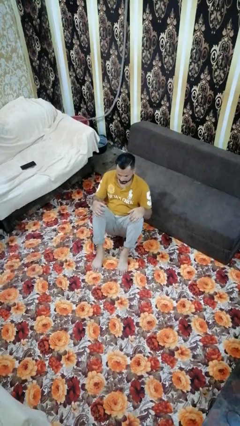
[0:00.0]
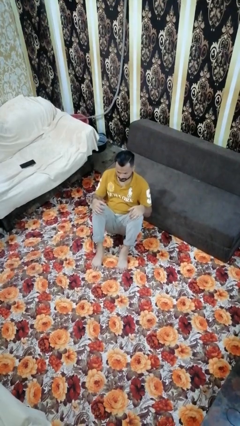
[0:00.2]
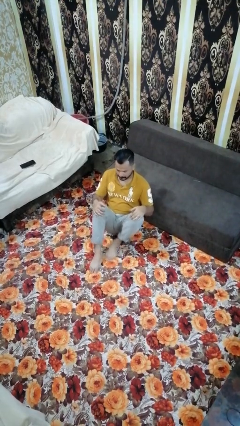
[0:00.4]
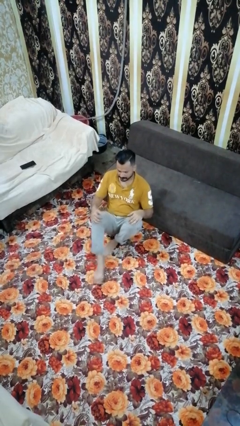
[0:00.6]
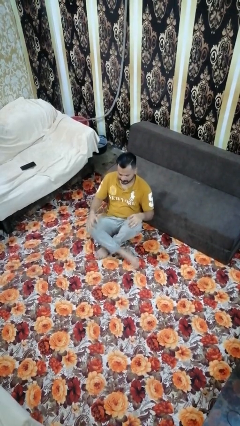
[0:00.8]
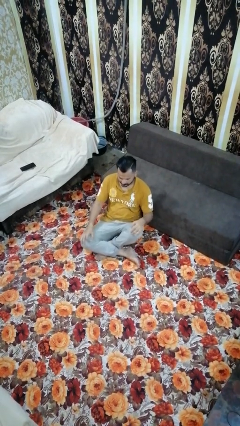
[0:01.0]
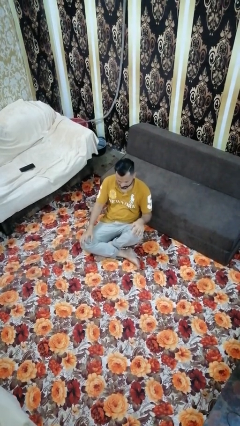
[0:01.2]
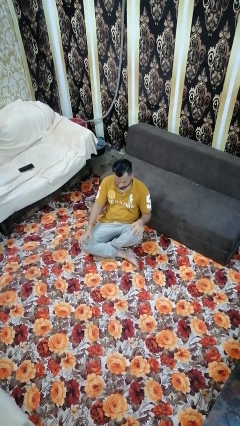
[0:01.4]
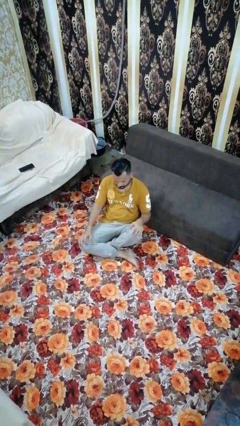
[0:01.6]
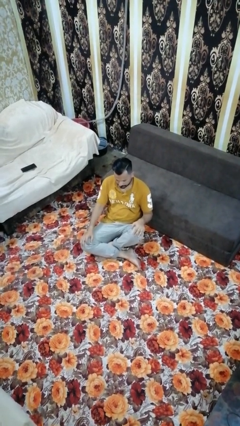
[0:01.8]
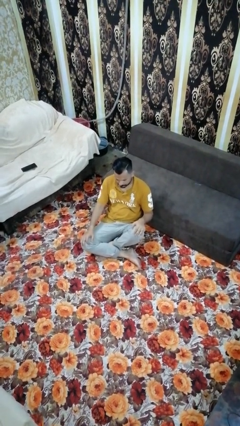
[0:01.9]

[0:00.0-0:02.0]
person crosses legs

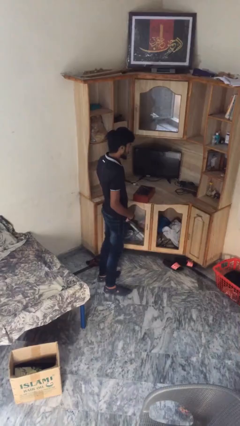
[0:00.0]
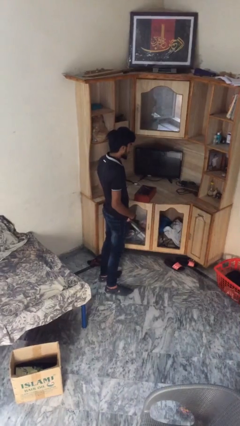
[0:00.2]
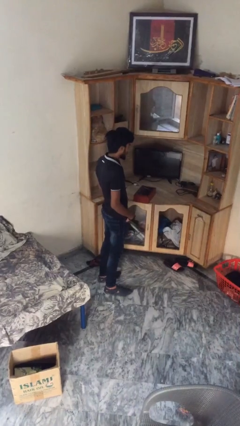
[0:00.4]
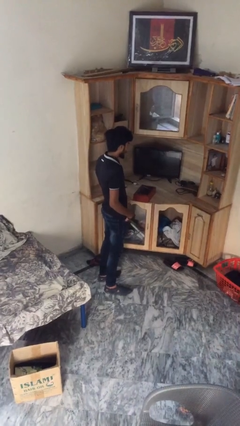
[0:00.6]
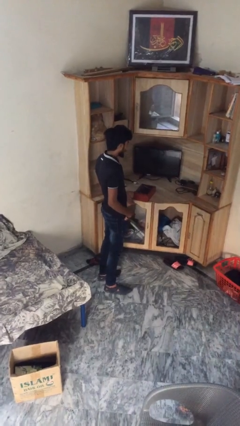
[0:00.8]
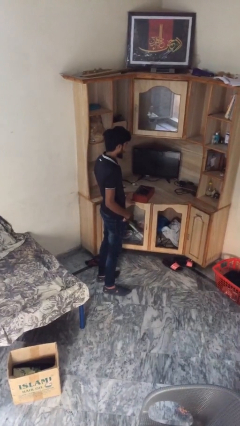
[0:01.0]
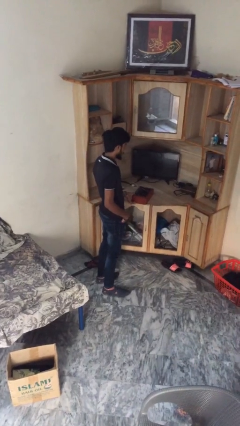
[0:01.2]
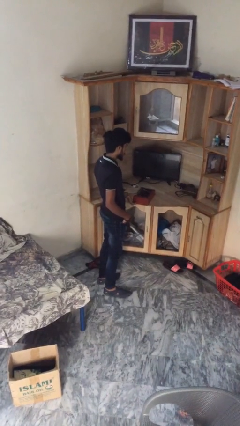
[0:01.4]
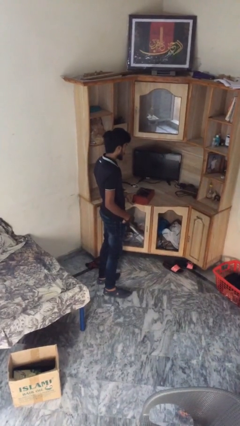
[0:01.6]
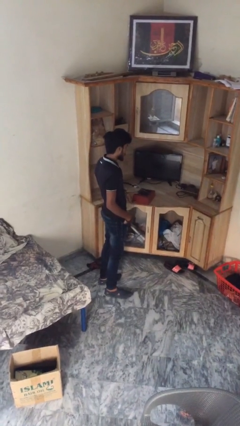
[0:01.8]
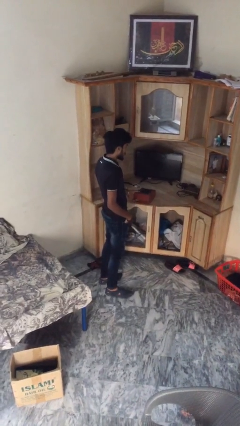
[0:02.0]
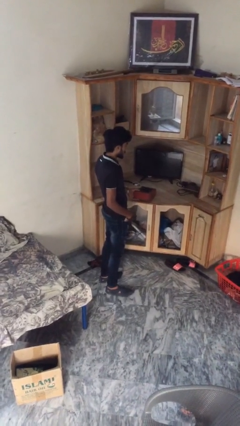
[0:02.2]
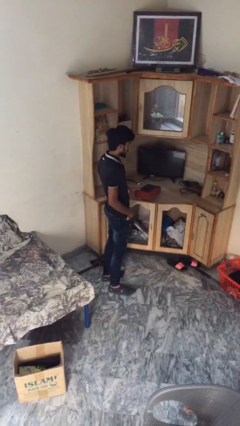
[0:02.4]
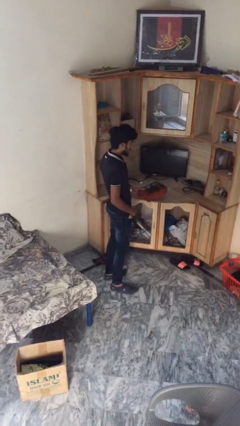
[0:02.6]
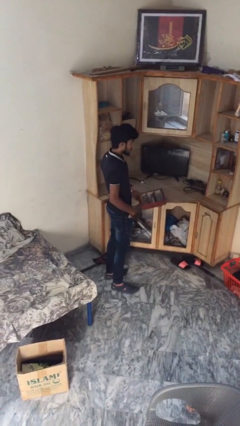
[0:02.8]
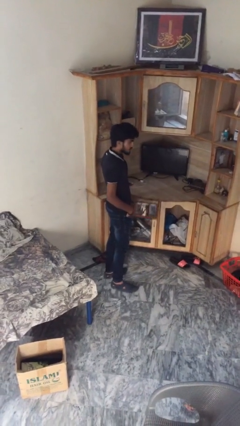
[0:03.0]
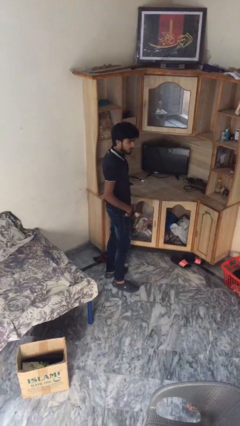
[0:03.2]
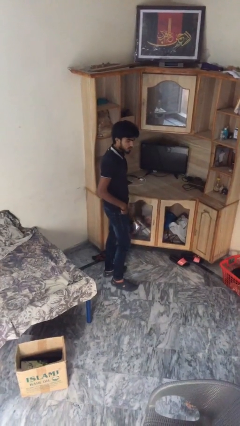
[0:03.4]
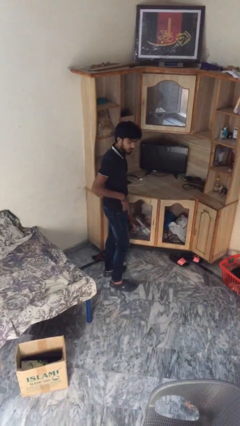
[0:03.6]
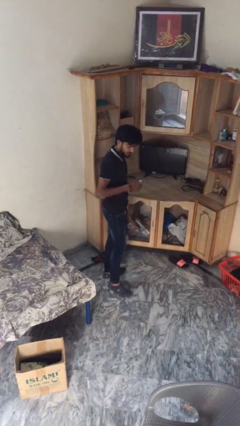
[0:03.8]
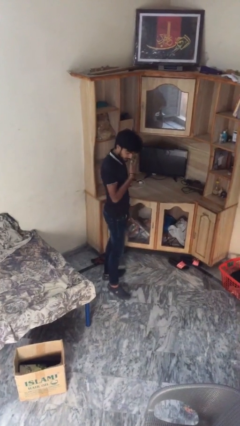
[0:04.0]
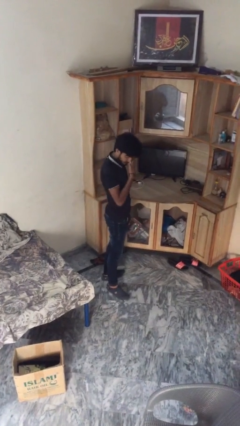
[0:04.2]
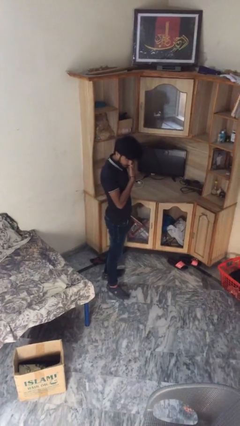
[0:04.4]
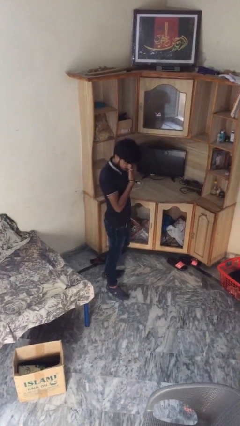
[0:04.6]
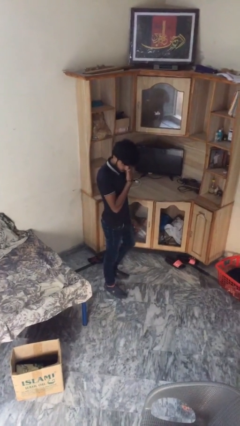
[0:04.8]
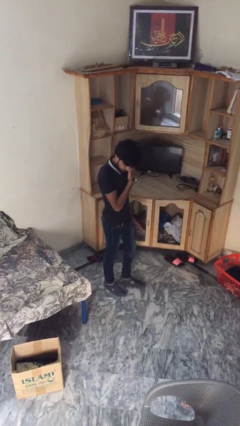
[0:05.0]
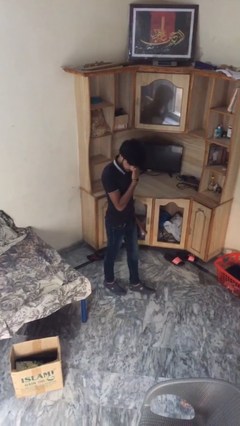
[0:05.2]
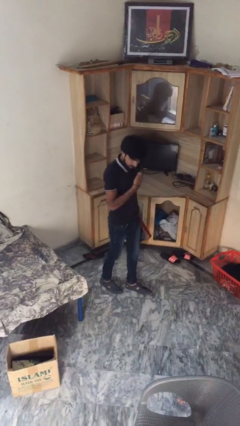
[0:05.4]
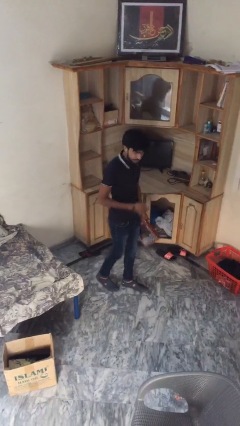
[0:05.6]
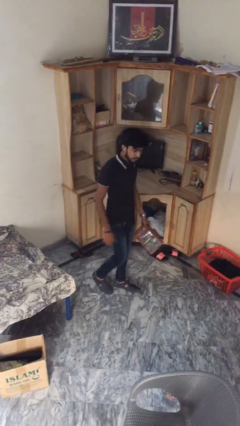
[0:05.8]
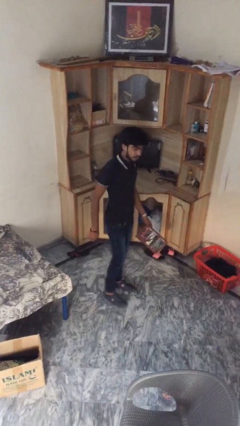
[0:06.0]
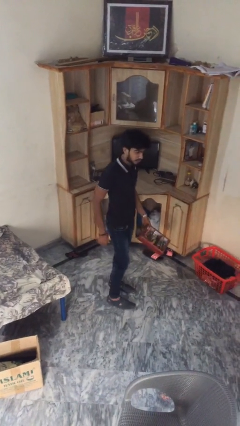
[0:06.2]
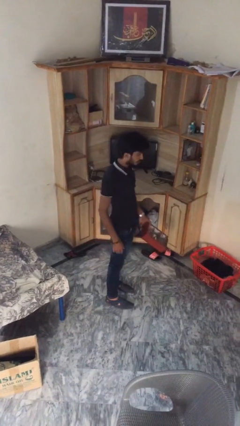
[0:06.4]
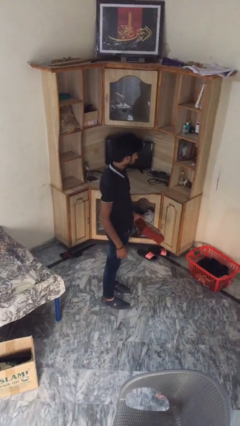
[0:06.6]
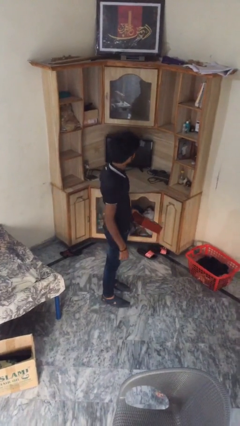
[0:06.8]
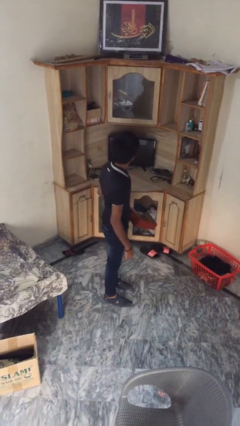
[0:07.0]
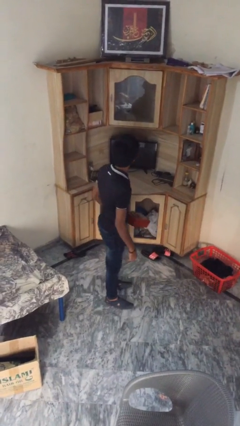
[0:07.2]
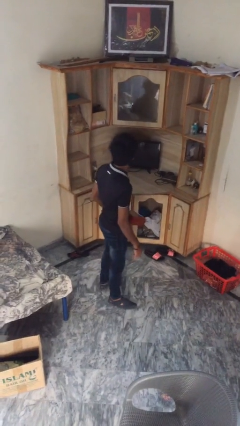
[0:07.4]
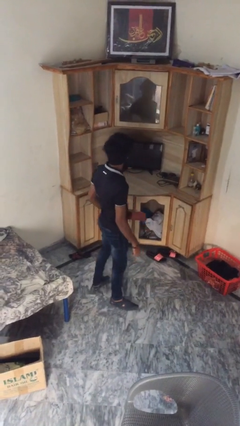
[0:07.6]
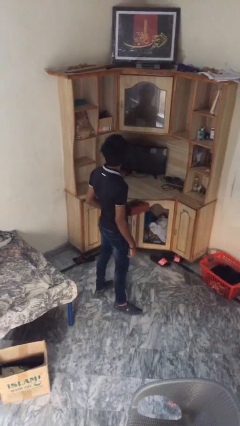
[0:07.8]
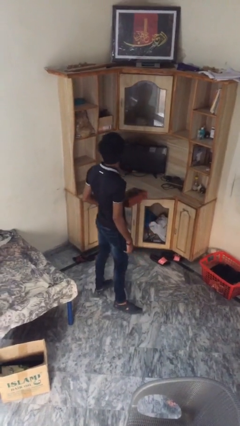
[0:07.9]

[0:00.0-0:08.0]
person picks up object from table

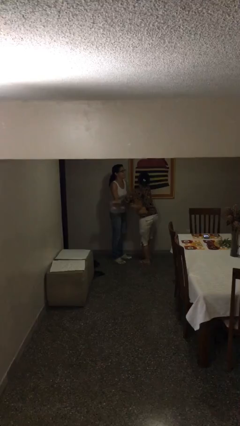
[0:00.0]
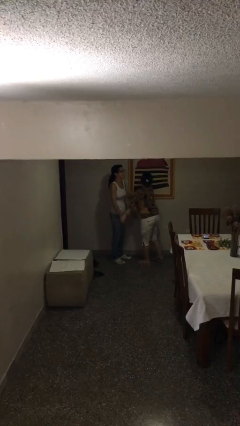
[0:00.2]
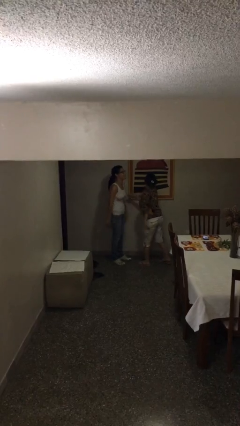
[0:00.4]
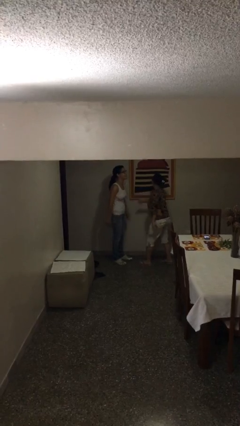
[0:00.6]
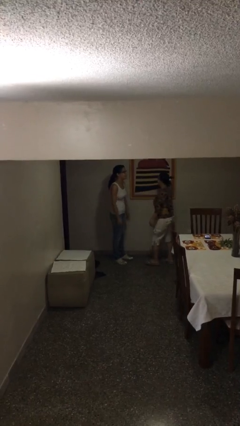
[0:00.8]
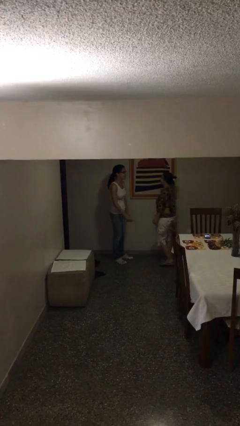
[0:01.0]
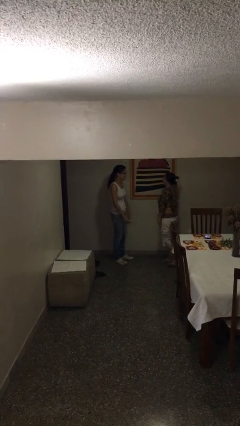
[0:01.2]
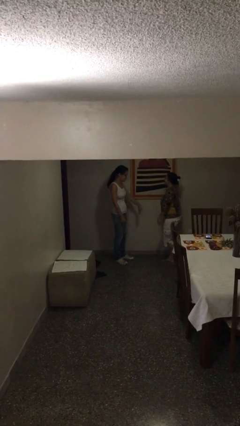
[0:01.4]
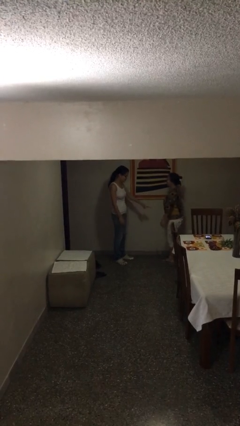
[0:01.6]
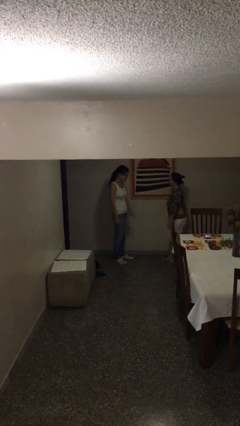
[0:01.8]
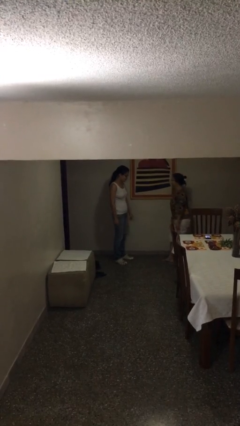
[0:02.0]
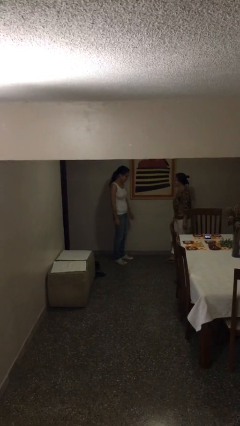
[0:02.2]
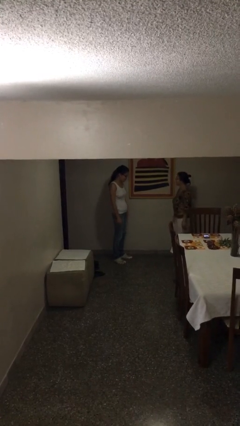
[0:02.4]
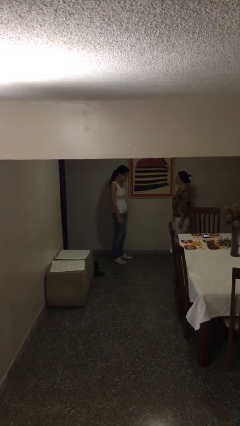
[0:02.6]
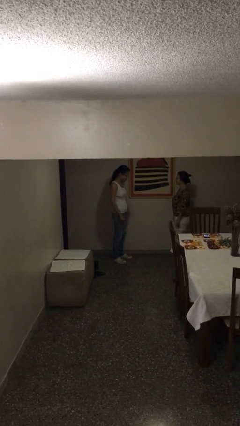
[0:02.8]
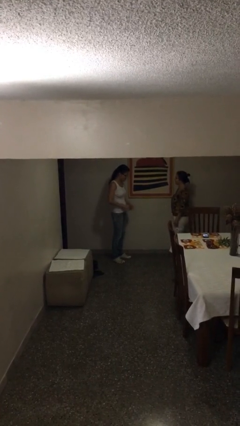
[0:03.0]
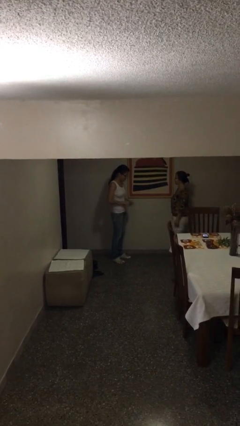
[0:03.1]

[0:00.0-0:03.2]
person talks to person

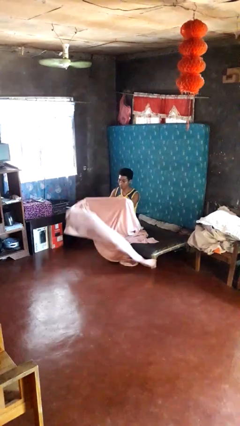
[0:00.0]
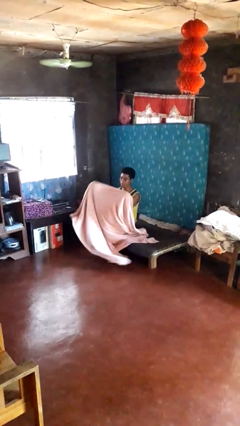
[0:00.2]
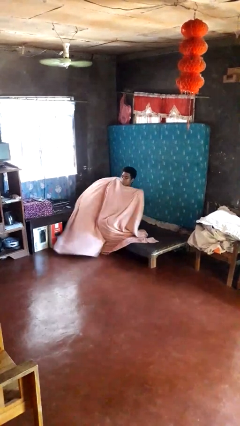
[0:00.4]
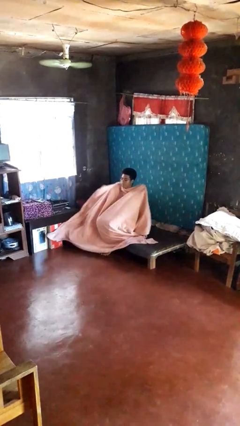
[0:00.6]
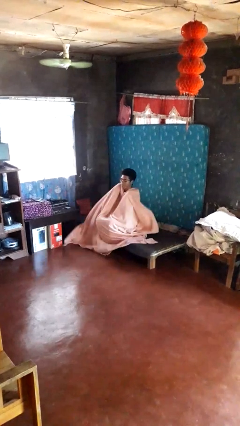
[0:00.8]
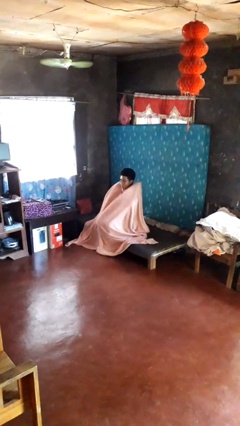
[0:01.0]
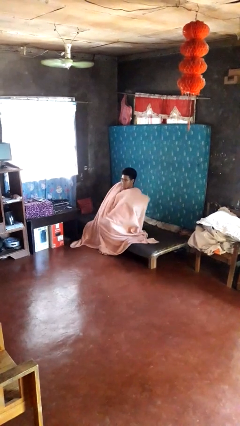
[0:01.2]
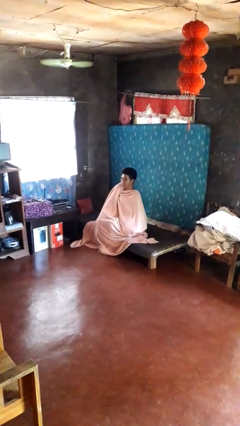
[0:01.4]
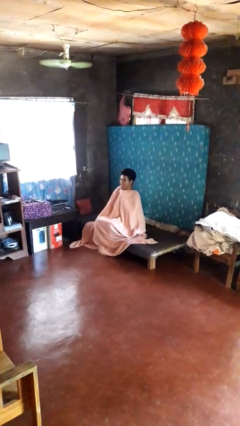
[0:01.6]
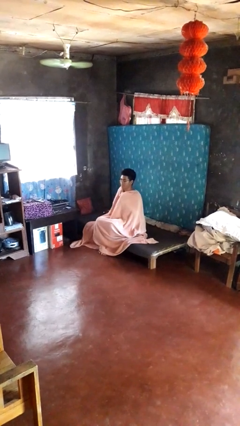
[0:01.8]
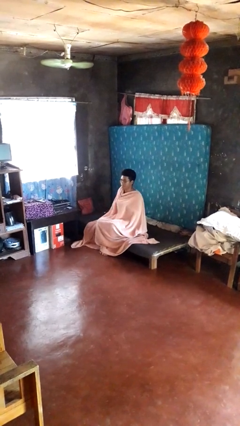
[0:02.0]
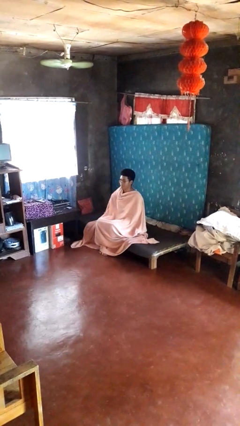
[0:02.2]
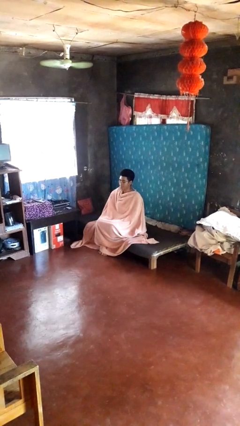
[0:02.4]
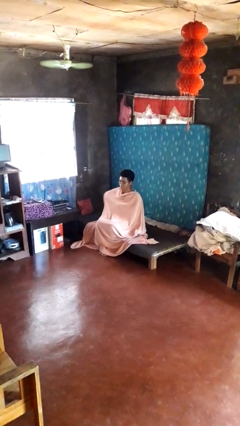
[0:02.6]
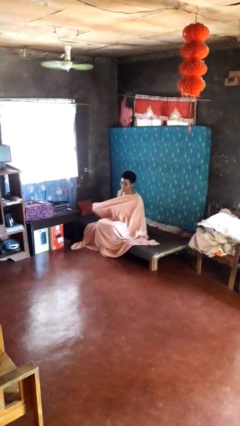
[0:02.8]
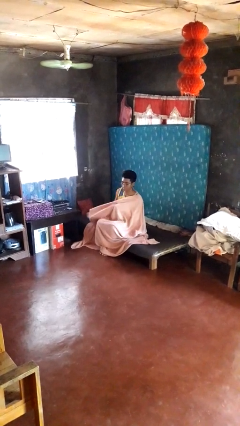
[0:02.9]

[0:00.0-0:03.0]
person covers with blanket

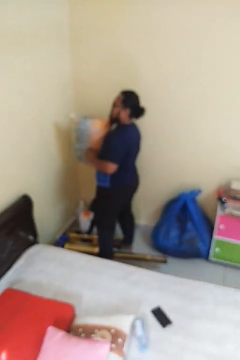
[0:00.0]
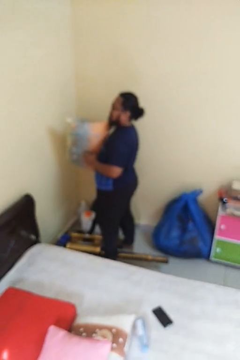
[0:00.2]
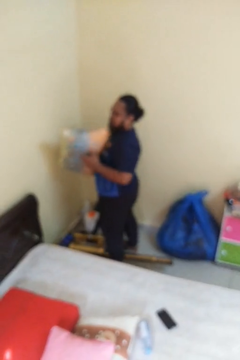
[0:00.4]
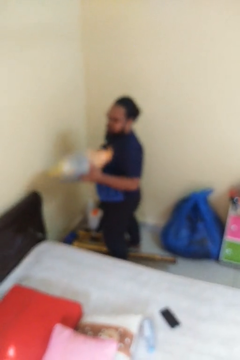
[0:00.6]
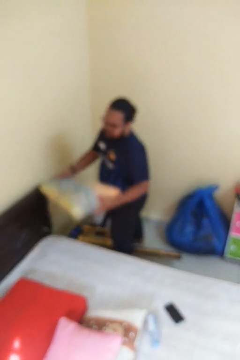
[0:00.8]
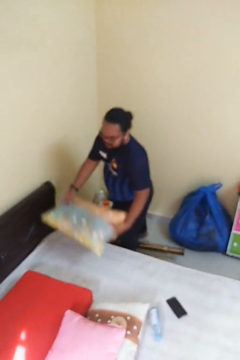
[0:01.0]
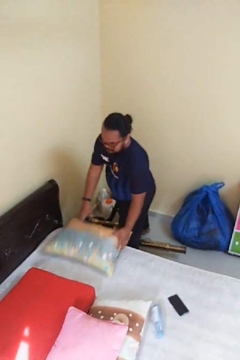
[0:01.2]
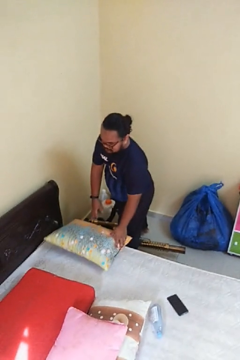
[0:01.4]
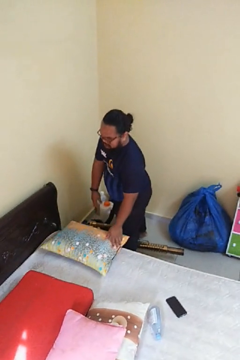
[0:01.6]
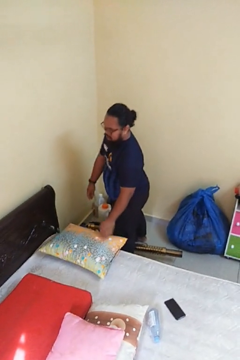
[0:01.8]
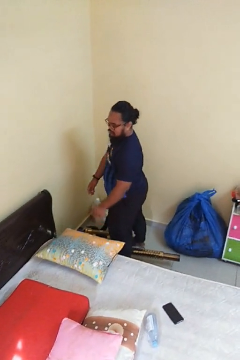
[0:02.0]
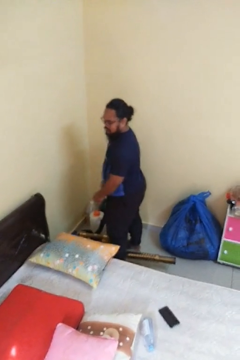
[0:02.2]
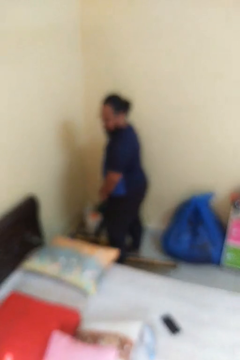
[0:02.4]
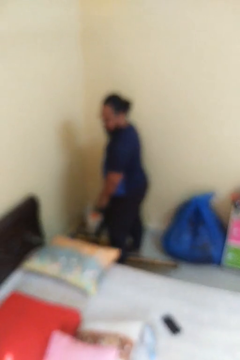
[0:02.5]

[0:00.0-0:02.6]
person puts down object on bed
